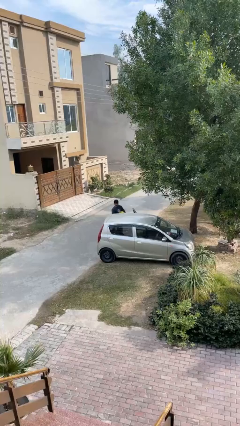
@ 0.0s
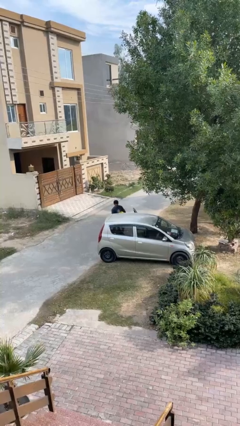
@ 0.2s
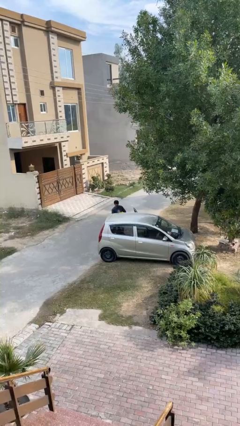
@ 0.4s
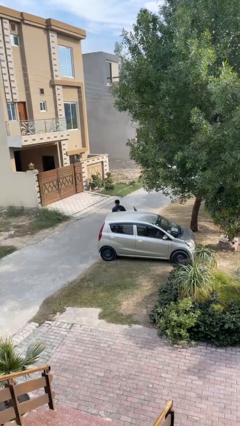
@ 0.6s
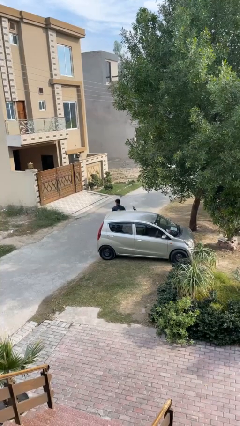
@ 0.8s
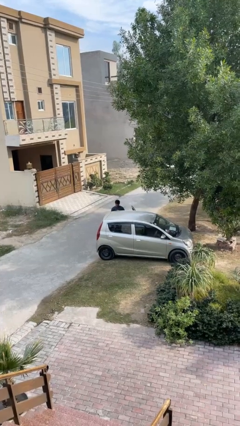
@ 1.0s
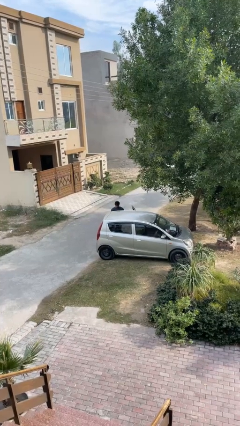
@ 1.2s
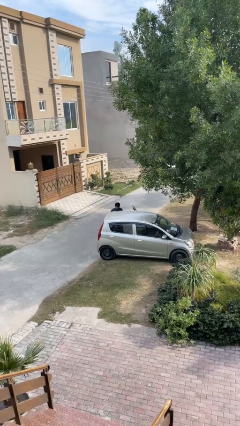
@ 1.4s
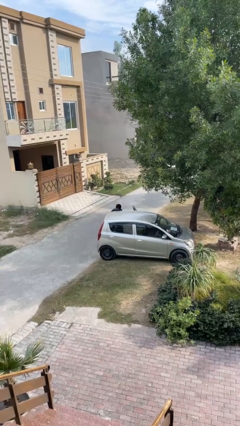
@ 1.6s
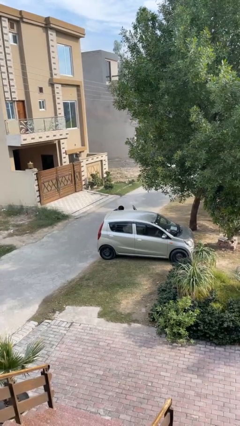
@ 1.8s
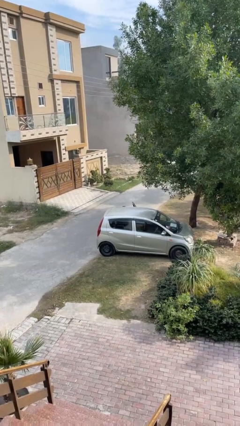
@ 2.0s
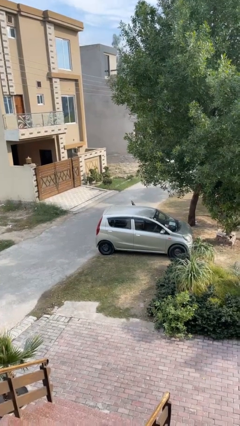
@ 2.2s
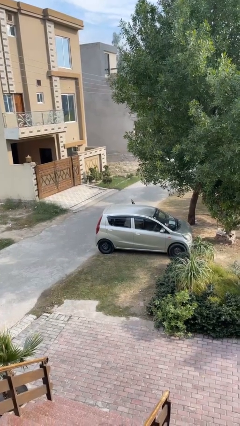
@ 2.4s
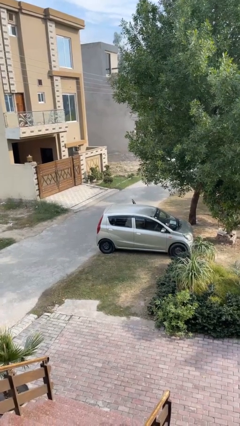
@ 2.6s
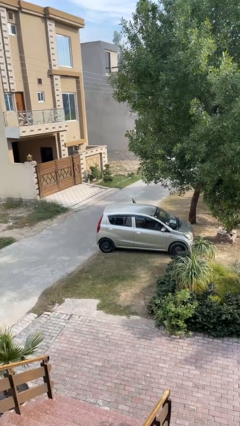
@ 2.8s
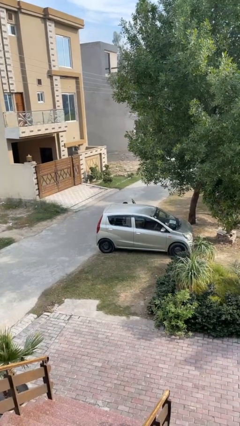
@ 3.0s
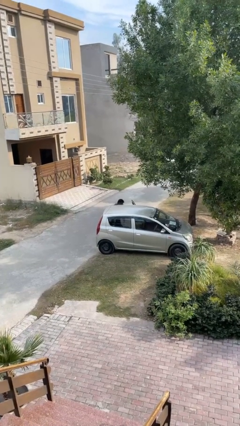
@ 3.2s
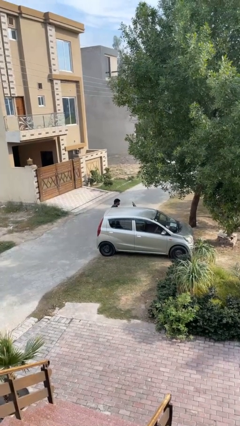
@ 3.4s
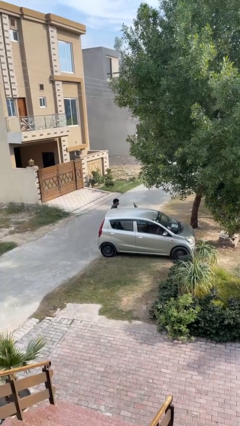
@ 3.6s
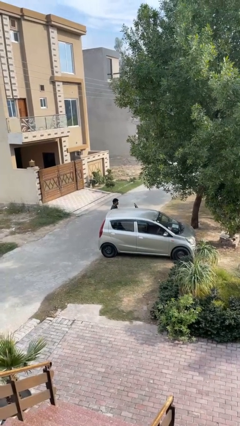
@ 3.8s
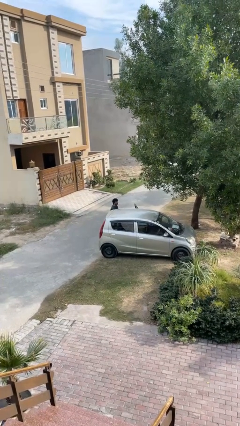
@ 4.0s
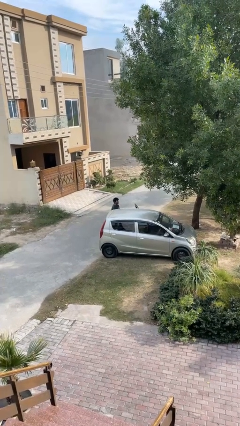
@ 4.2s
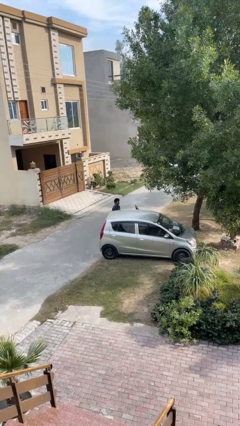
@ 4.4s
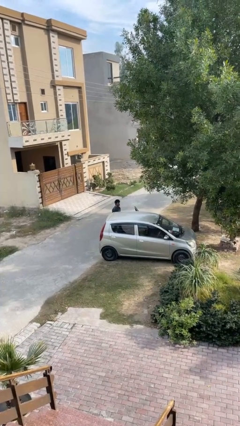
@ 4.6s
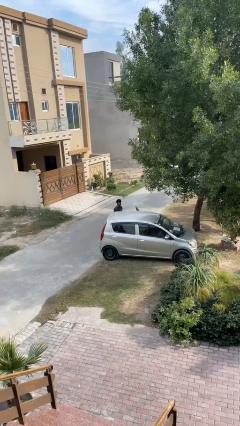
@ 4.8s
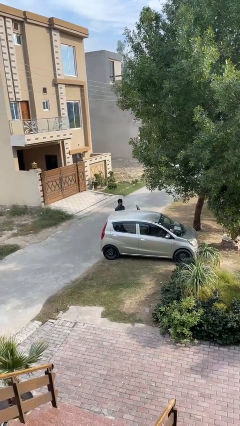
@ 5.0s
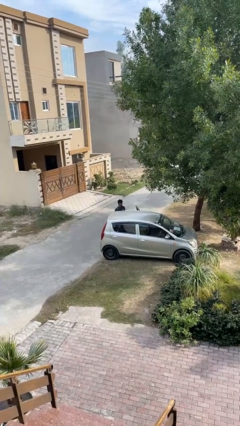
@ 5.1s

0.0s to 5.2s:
person loads car

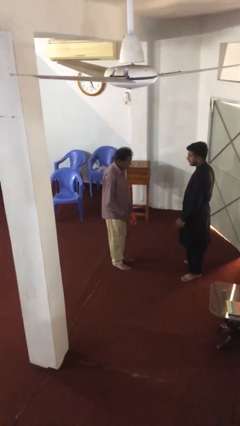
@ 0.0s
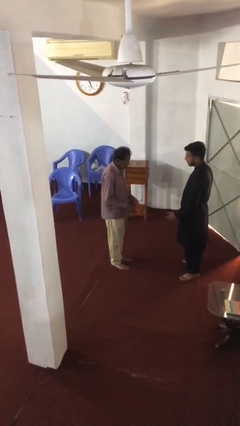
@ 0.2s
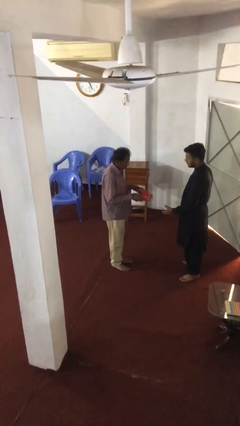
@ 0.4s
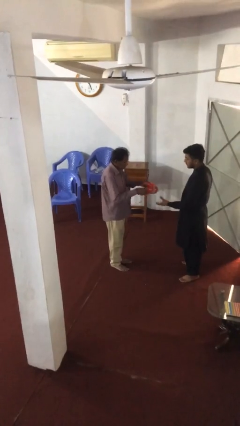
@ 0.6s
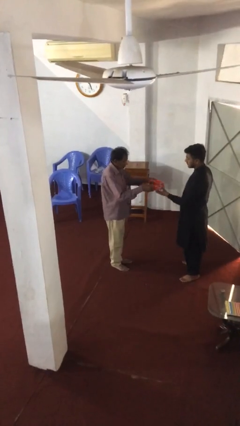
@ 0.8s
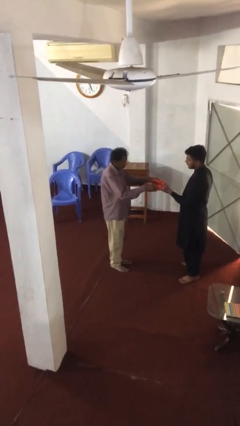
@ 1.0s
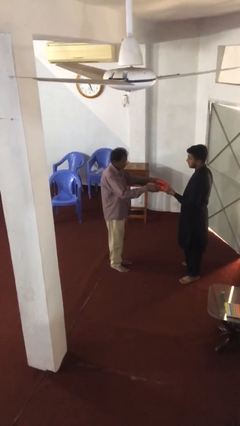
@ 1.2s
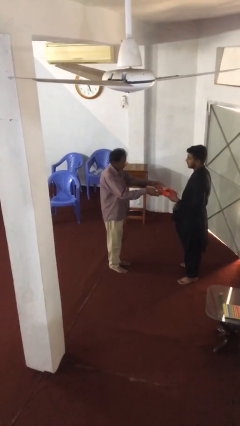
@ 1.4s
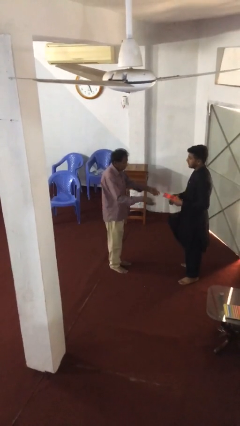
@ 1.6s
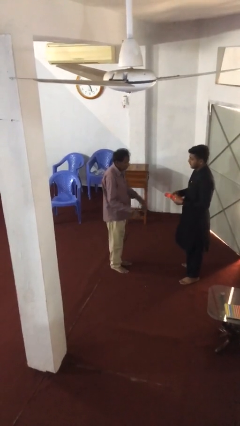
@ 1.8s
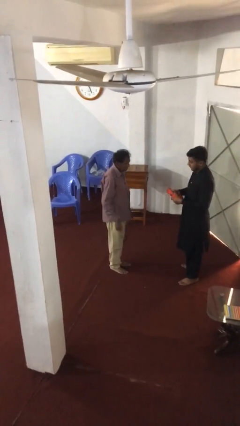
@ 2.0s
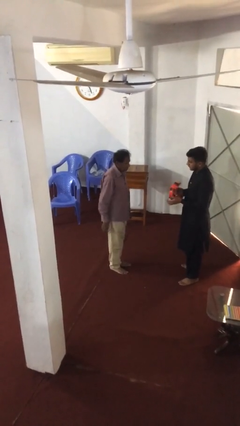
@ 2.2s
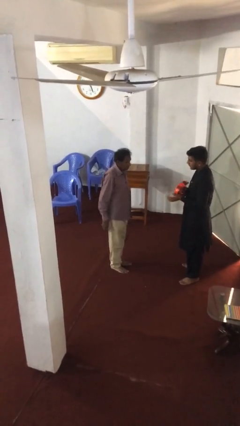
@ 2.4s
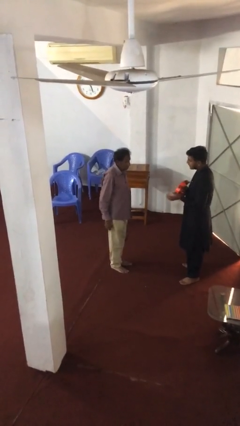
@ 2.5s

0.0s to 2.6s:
person transfers object to person

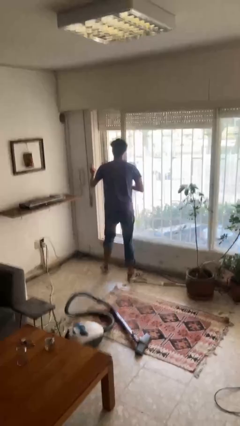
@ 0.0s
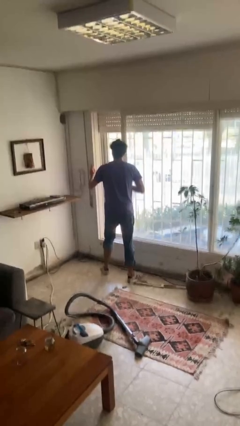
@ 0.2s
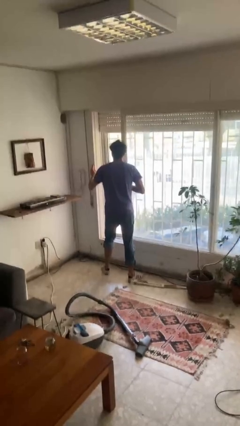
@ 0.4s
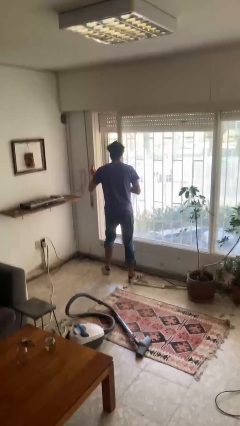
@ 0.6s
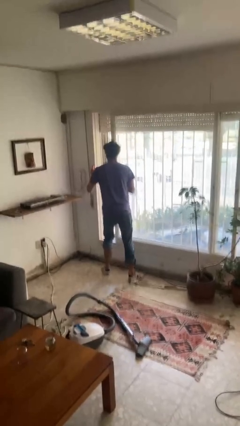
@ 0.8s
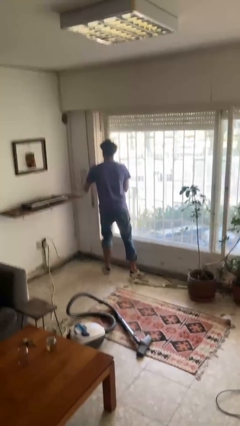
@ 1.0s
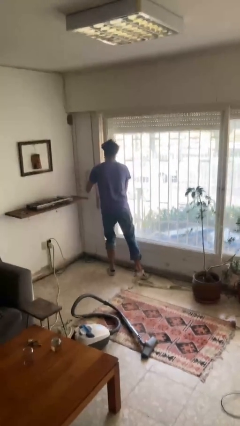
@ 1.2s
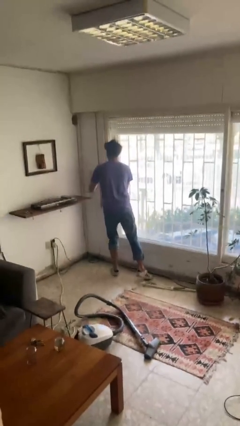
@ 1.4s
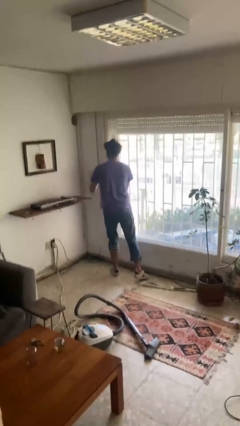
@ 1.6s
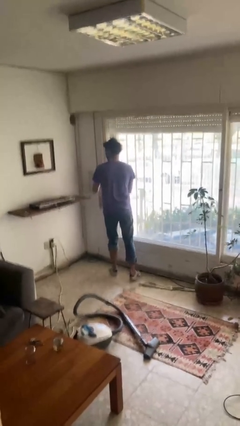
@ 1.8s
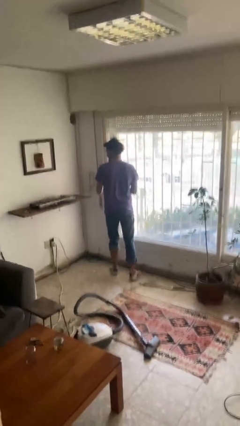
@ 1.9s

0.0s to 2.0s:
person closes sliding door

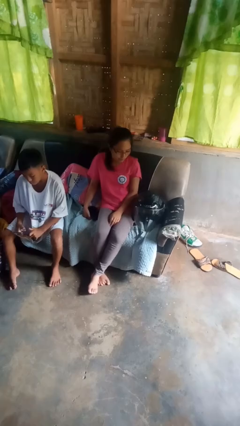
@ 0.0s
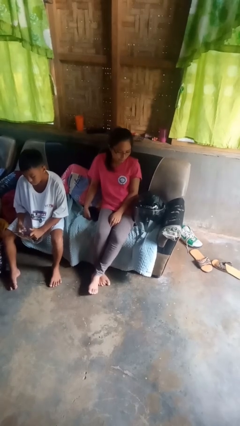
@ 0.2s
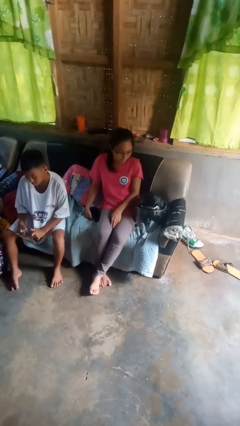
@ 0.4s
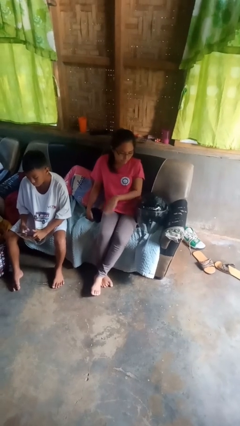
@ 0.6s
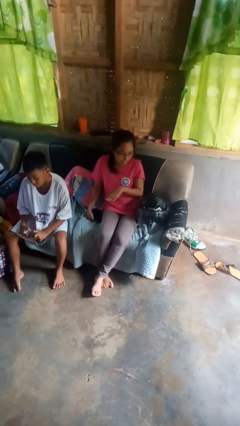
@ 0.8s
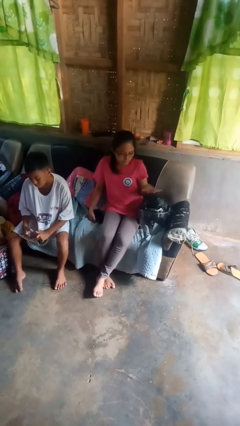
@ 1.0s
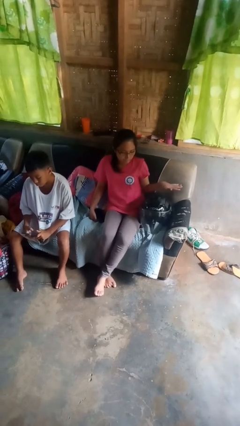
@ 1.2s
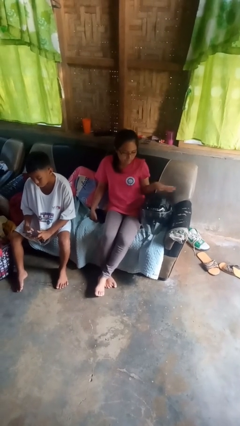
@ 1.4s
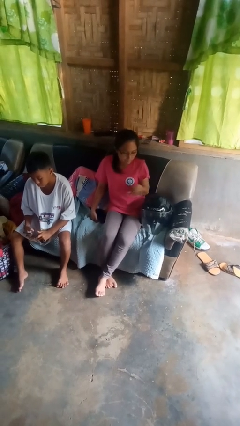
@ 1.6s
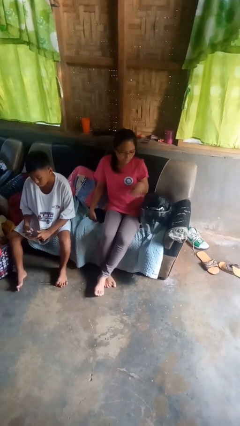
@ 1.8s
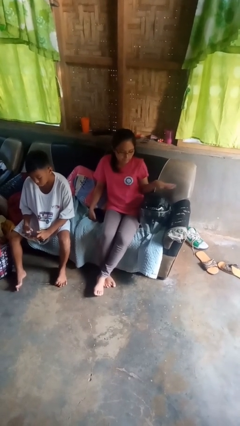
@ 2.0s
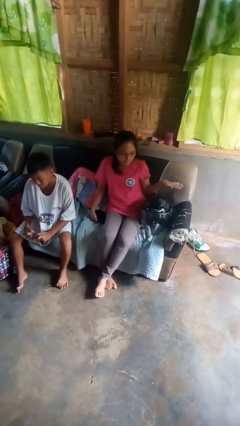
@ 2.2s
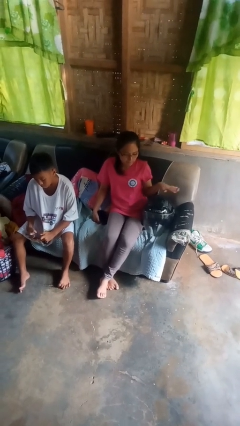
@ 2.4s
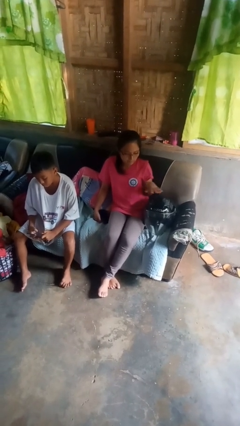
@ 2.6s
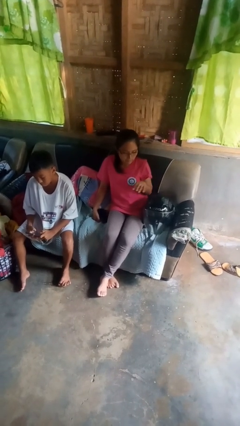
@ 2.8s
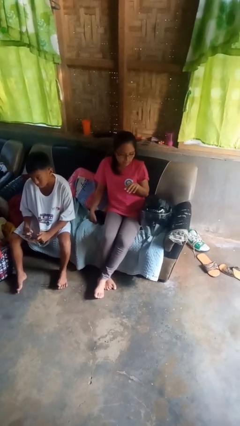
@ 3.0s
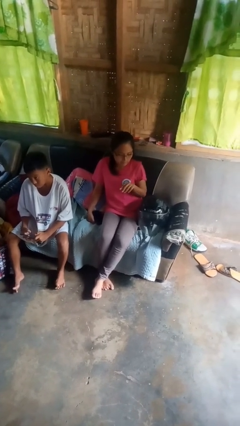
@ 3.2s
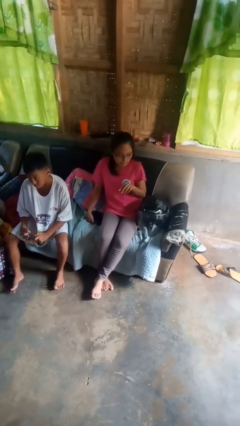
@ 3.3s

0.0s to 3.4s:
person waves hand over object

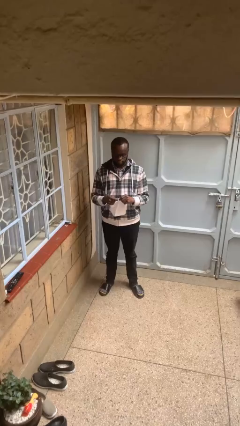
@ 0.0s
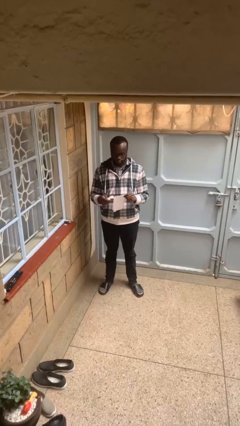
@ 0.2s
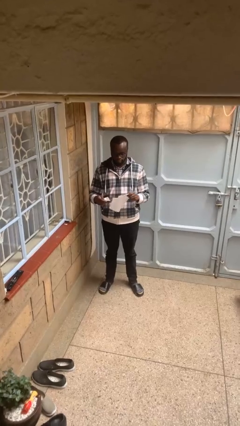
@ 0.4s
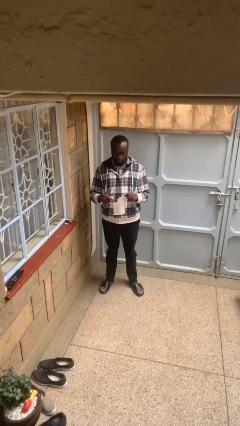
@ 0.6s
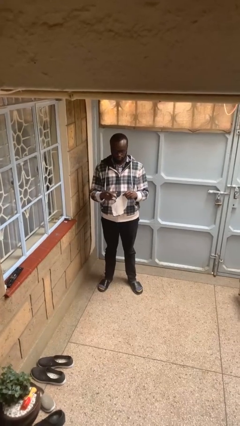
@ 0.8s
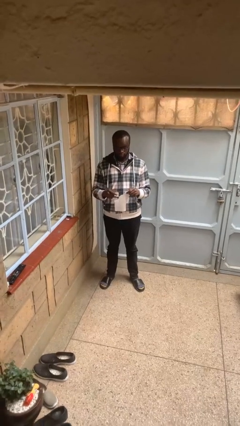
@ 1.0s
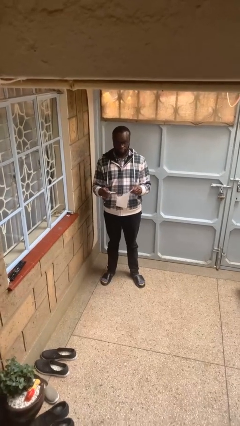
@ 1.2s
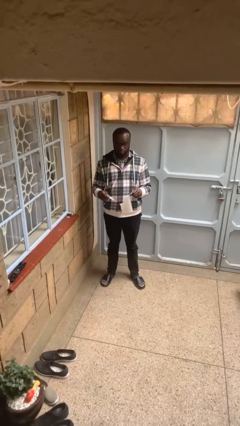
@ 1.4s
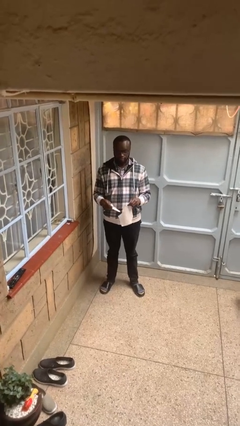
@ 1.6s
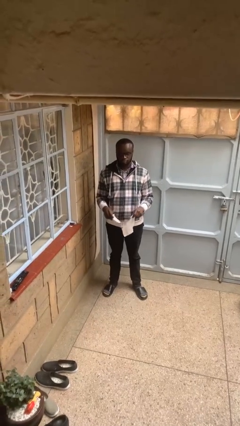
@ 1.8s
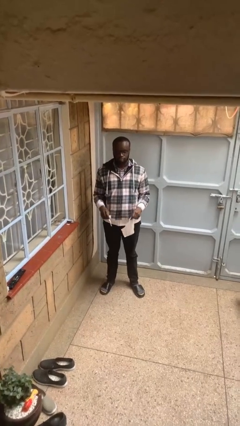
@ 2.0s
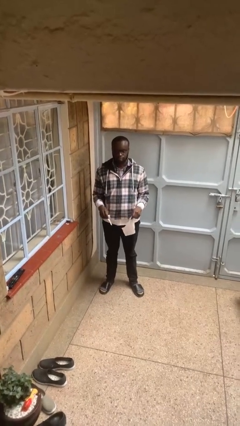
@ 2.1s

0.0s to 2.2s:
person tears paper

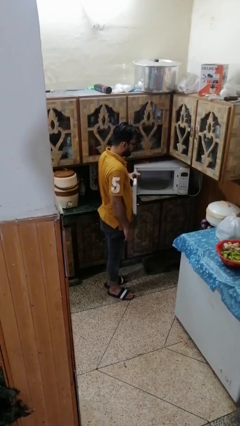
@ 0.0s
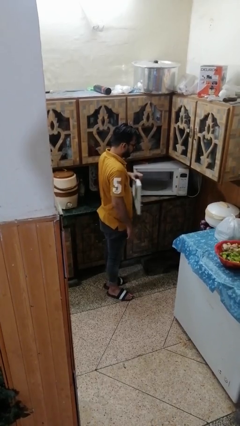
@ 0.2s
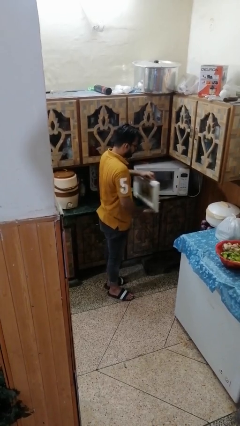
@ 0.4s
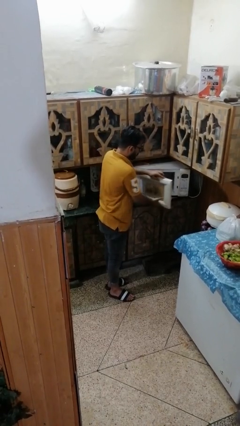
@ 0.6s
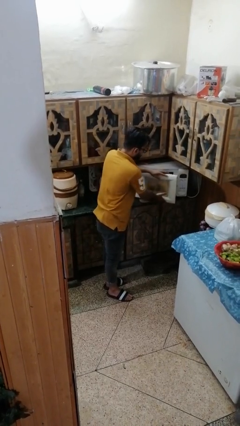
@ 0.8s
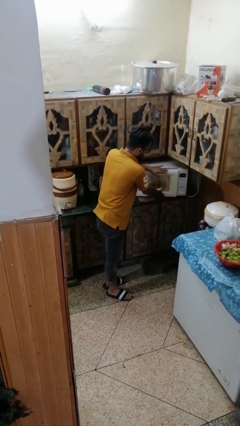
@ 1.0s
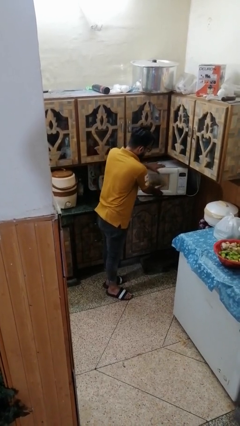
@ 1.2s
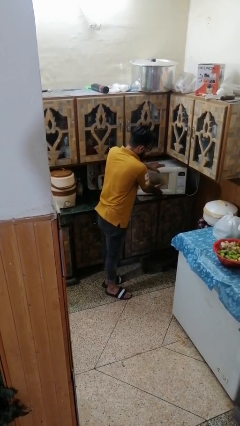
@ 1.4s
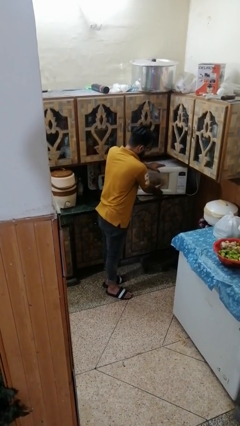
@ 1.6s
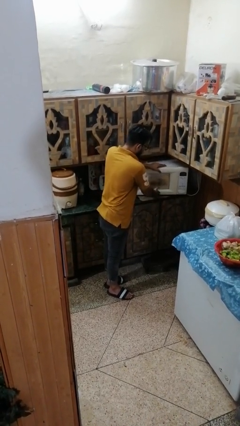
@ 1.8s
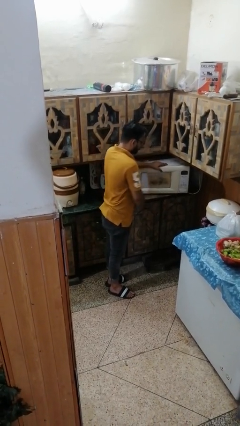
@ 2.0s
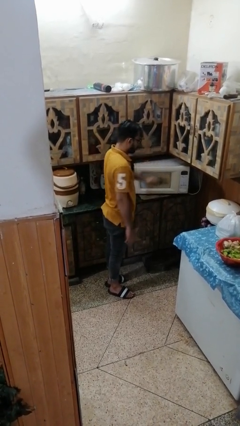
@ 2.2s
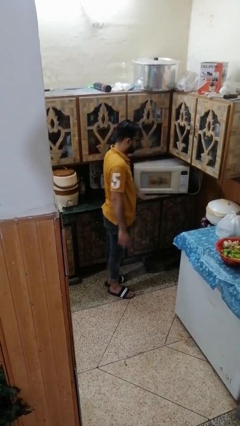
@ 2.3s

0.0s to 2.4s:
person closes microwave
